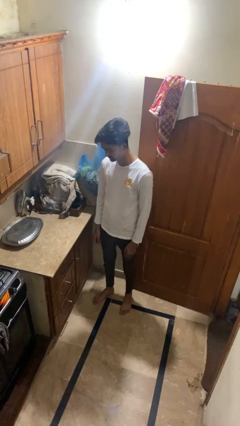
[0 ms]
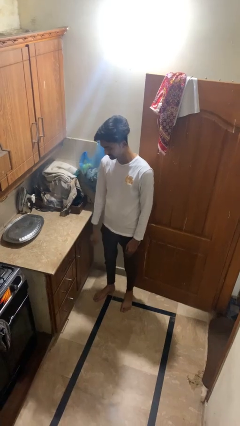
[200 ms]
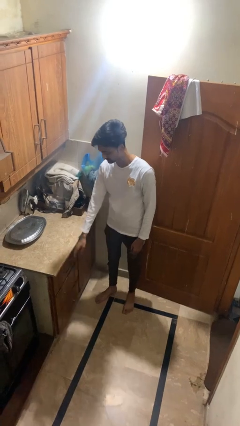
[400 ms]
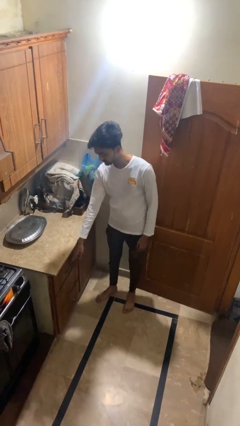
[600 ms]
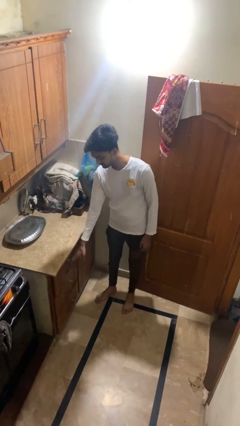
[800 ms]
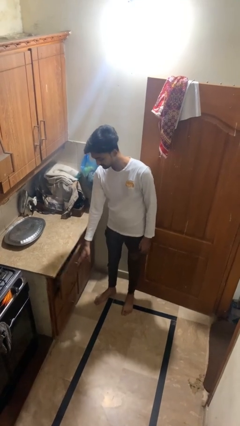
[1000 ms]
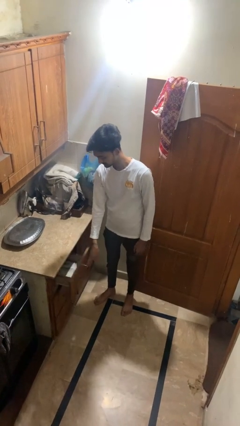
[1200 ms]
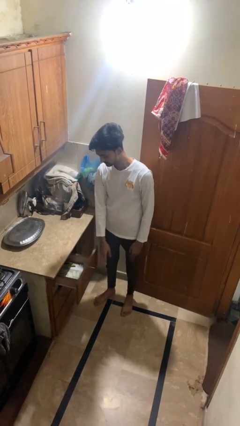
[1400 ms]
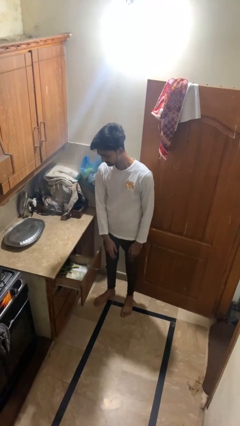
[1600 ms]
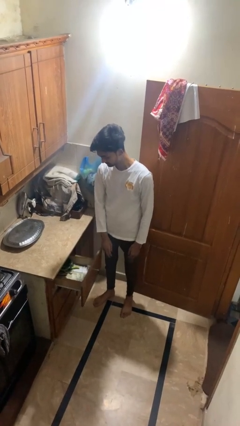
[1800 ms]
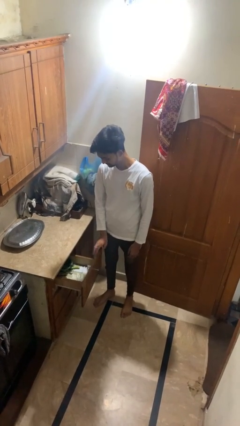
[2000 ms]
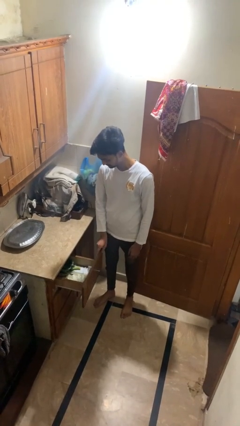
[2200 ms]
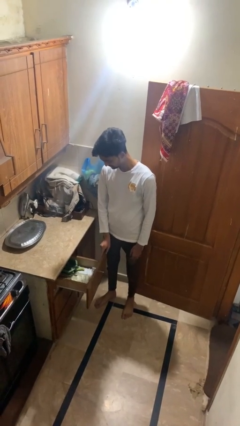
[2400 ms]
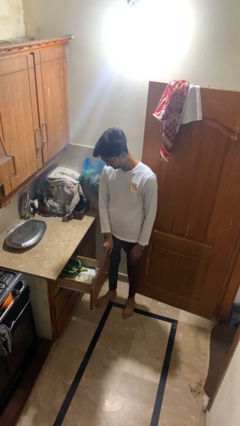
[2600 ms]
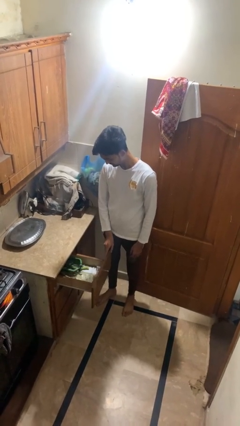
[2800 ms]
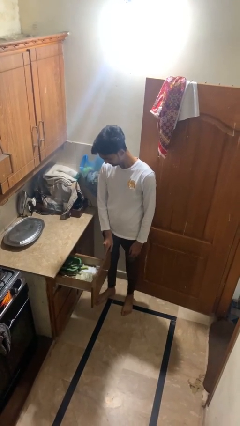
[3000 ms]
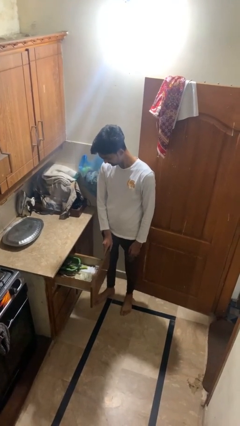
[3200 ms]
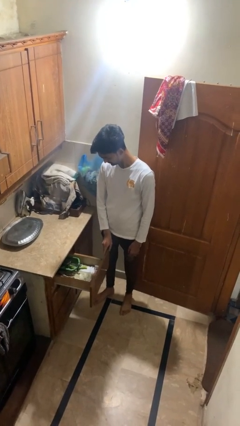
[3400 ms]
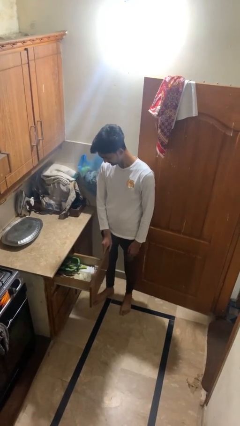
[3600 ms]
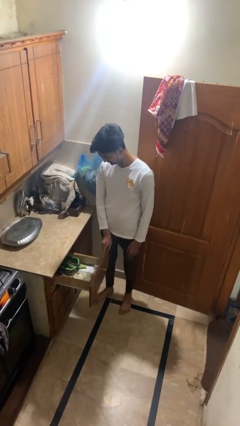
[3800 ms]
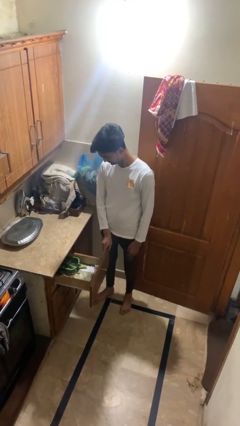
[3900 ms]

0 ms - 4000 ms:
person opens kitchen drawer

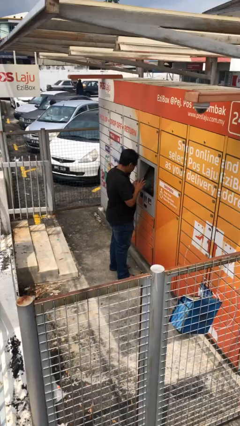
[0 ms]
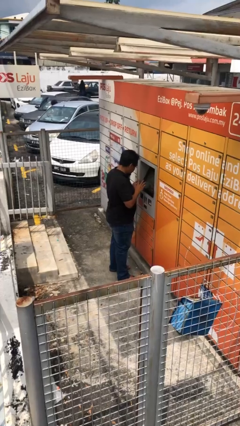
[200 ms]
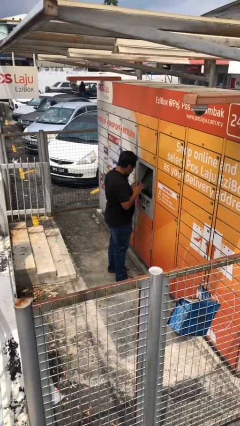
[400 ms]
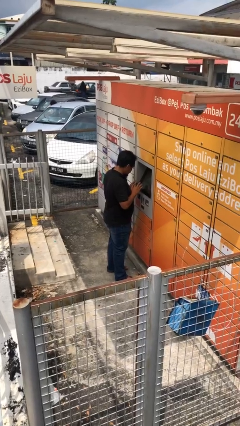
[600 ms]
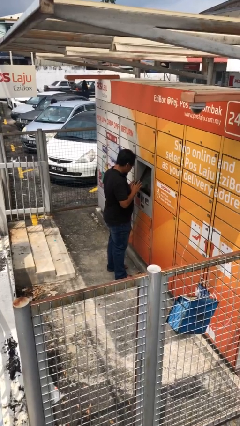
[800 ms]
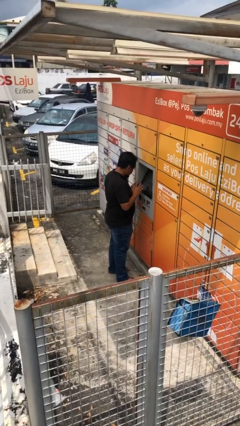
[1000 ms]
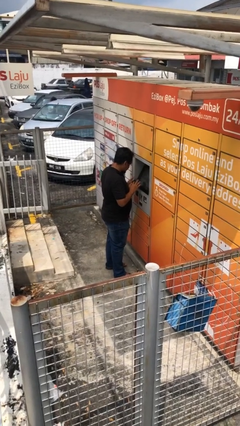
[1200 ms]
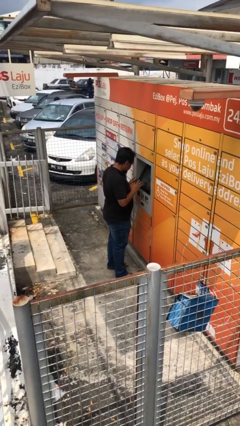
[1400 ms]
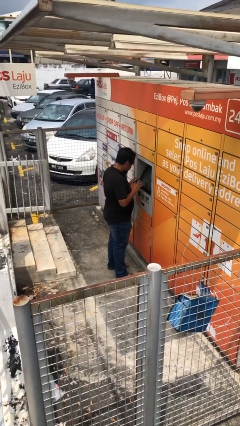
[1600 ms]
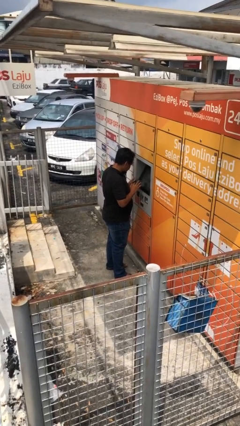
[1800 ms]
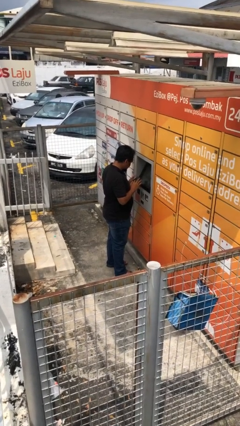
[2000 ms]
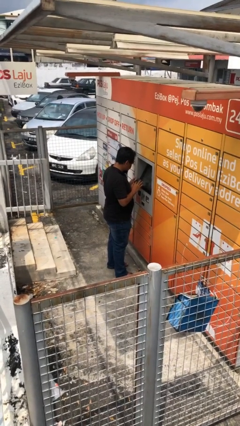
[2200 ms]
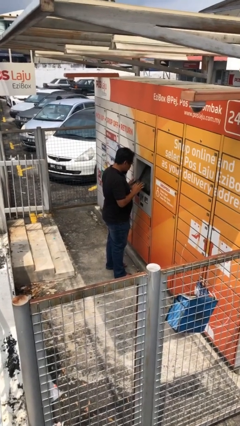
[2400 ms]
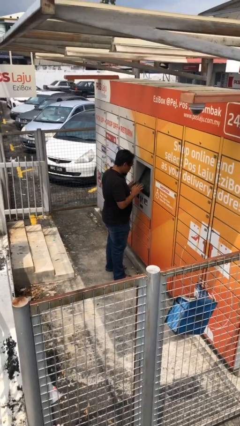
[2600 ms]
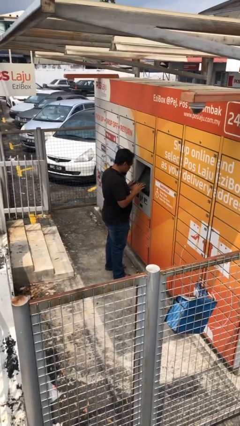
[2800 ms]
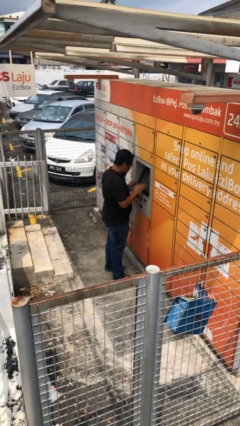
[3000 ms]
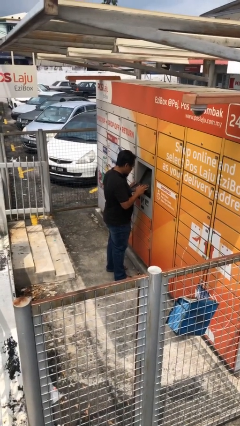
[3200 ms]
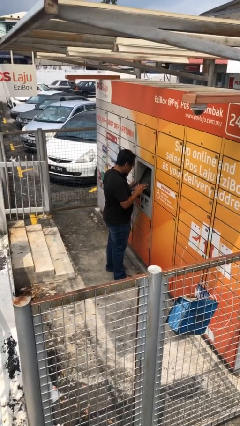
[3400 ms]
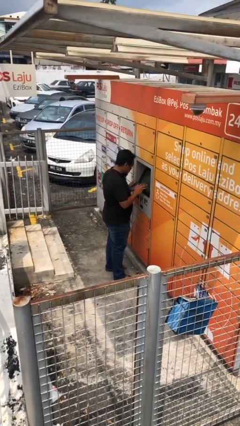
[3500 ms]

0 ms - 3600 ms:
person purchases from machine

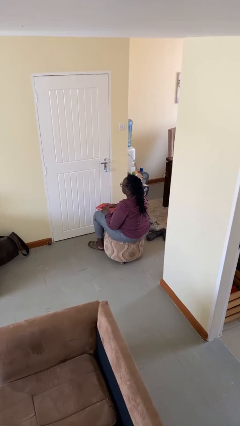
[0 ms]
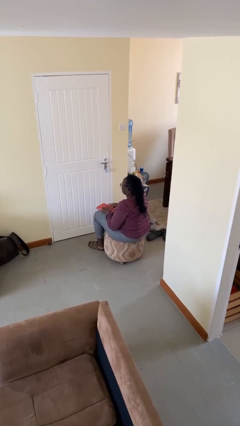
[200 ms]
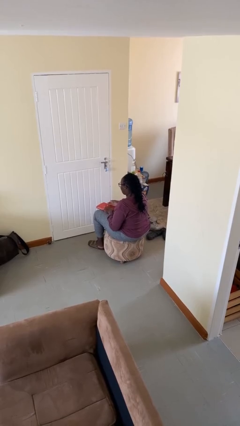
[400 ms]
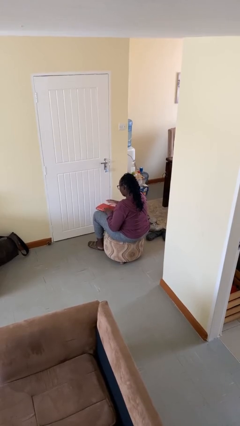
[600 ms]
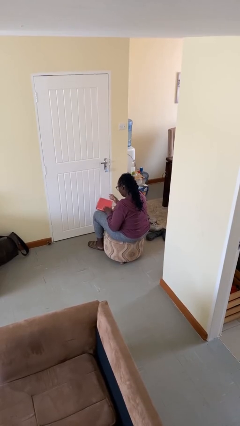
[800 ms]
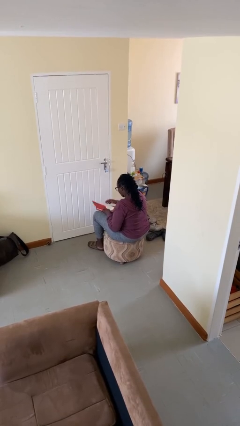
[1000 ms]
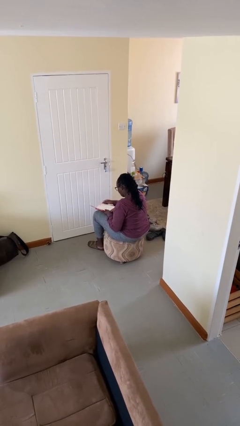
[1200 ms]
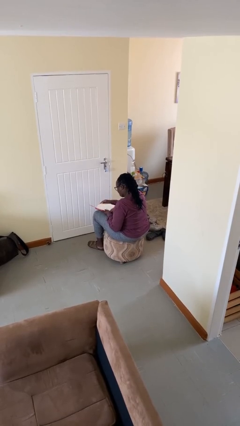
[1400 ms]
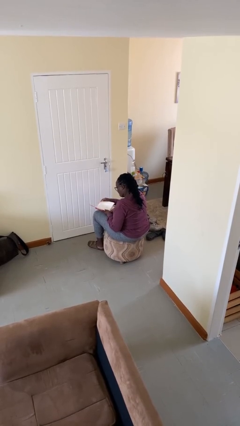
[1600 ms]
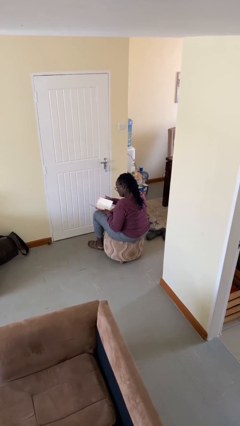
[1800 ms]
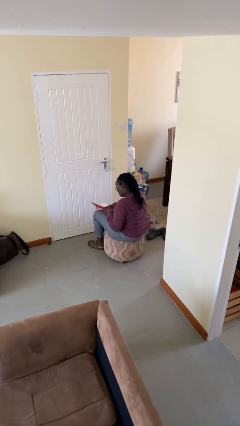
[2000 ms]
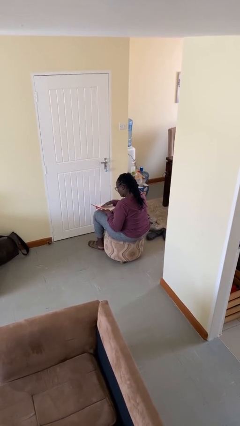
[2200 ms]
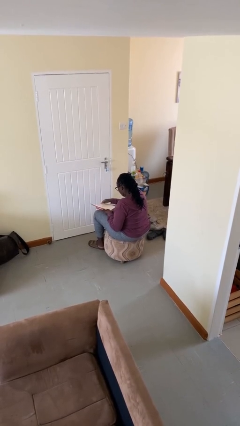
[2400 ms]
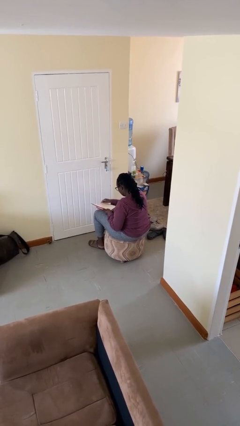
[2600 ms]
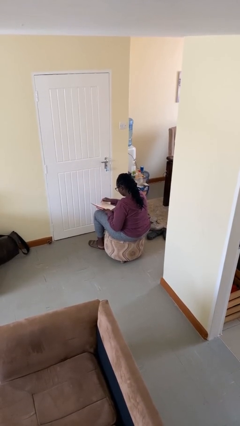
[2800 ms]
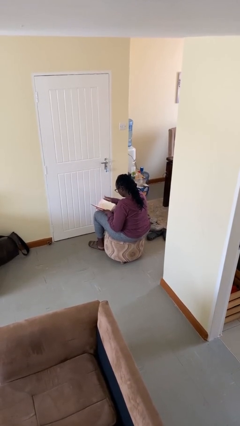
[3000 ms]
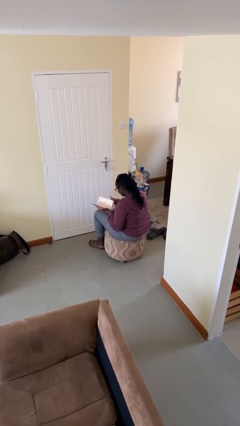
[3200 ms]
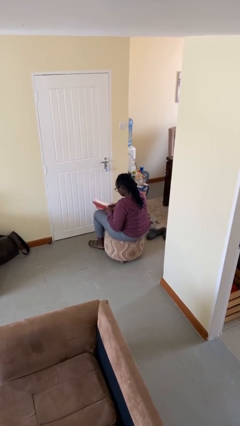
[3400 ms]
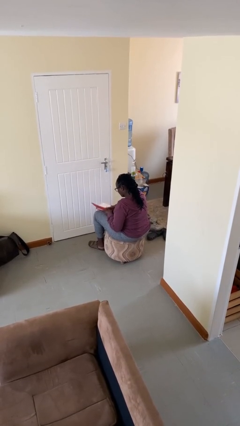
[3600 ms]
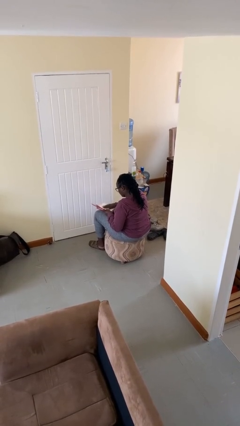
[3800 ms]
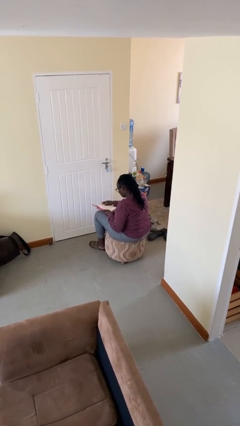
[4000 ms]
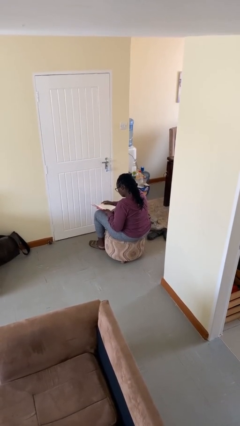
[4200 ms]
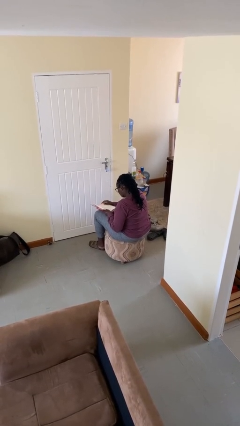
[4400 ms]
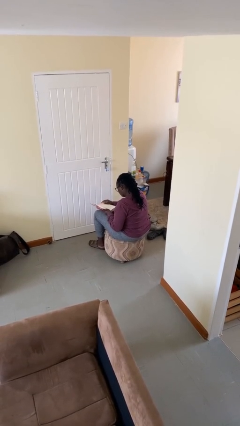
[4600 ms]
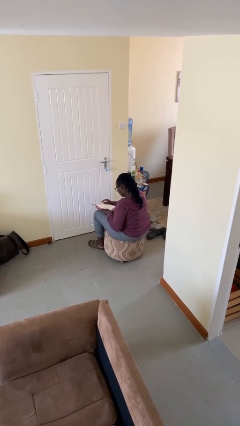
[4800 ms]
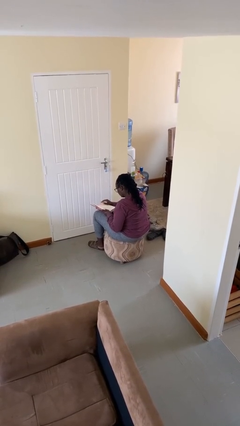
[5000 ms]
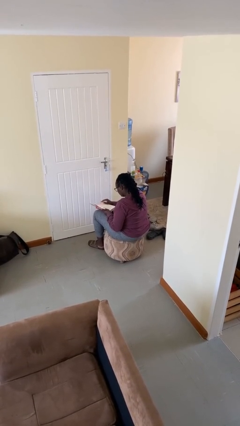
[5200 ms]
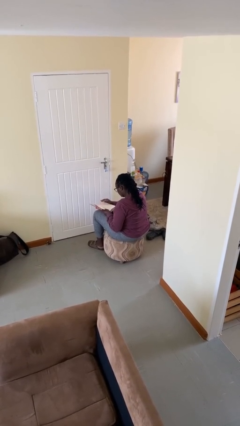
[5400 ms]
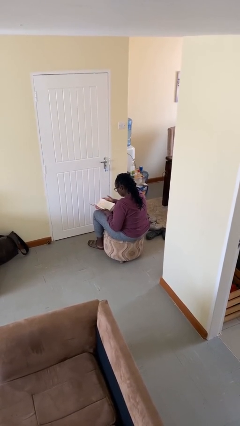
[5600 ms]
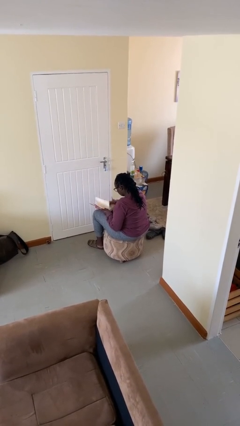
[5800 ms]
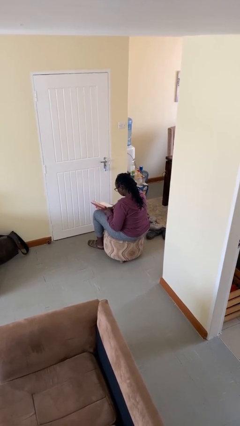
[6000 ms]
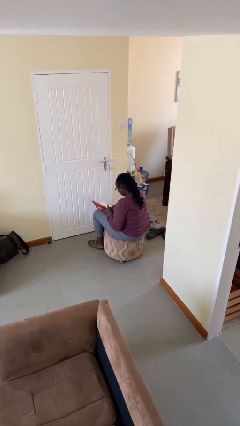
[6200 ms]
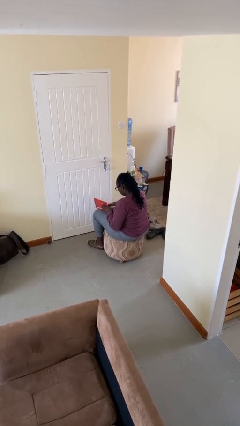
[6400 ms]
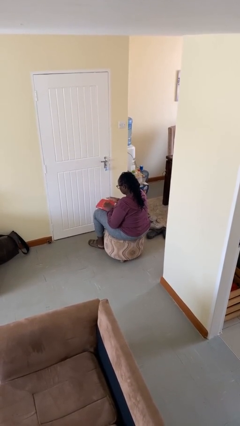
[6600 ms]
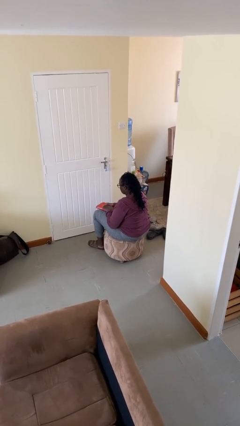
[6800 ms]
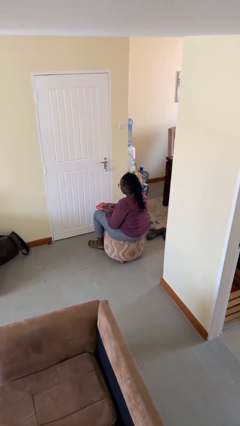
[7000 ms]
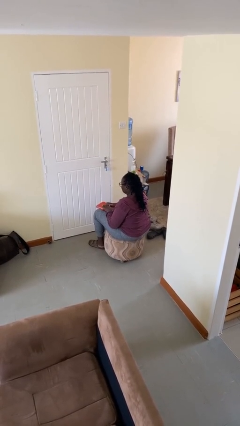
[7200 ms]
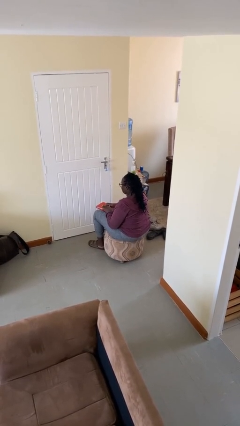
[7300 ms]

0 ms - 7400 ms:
person reads book

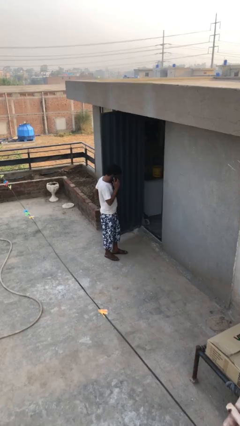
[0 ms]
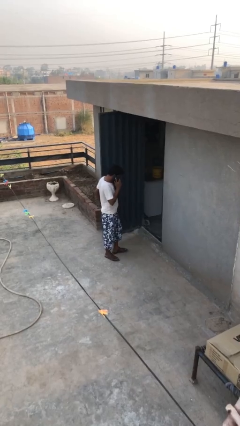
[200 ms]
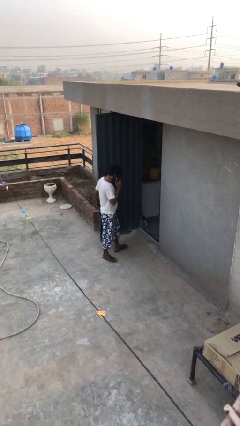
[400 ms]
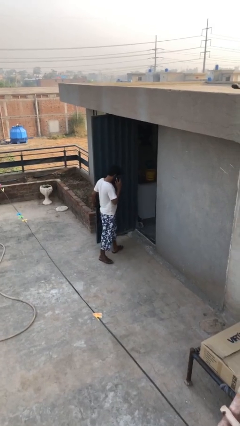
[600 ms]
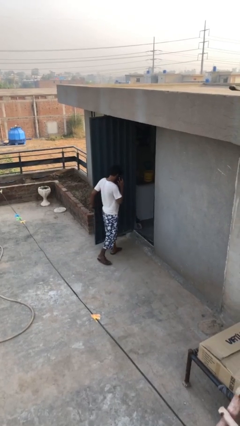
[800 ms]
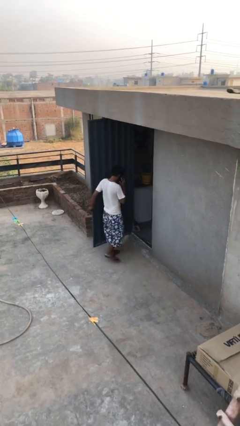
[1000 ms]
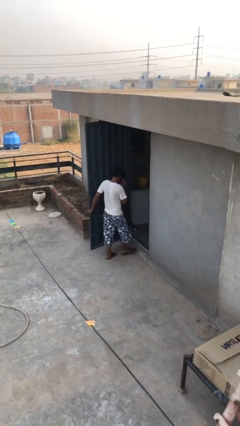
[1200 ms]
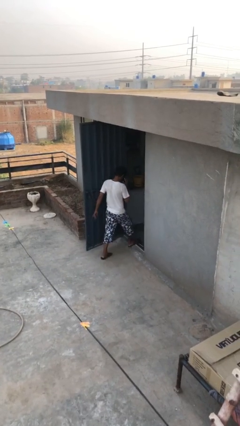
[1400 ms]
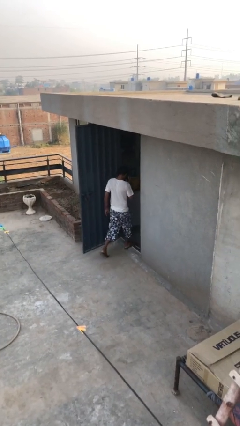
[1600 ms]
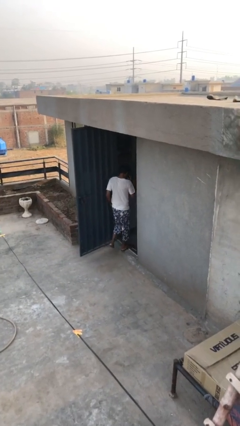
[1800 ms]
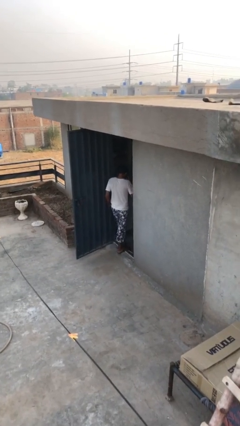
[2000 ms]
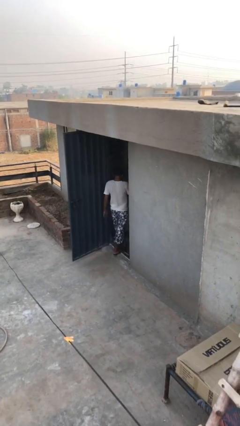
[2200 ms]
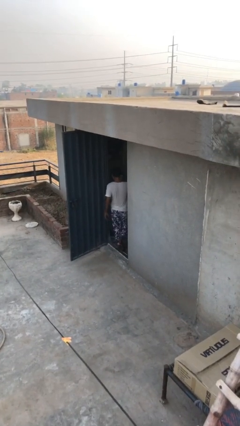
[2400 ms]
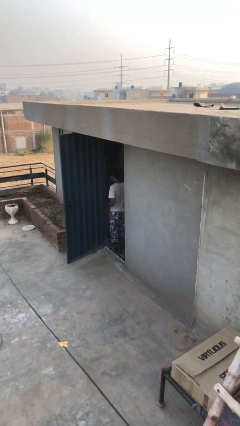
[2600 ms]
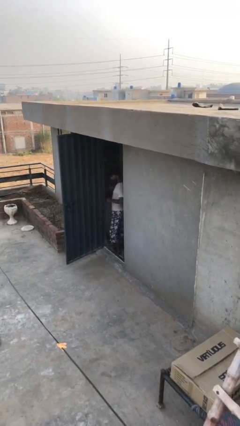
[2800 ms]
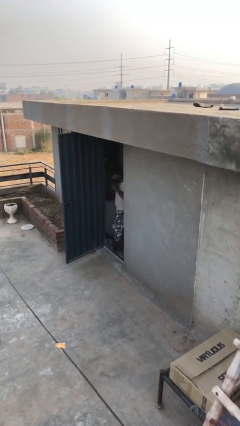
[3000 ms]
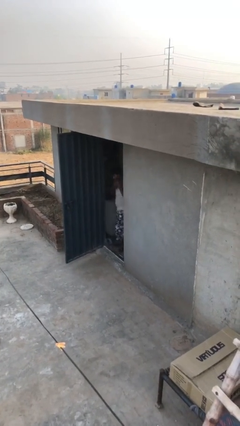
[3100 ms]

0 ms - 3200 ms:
person exits scene through structure
